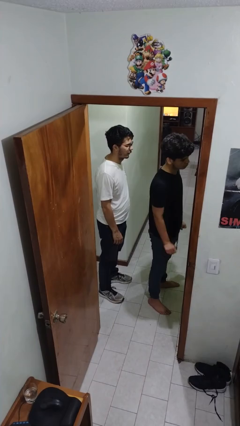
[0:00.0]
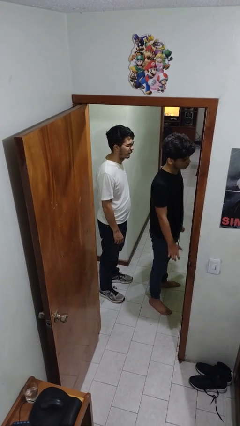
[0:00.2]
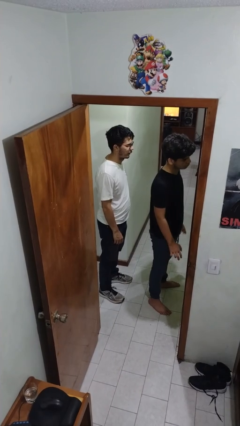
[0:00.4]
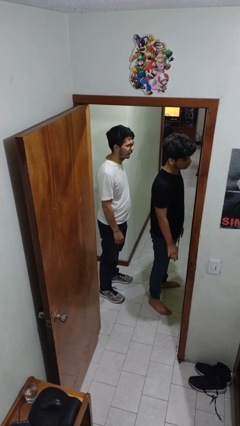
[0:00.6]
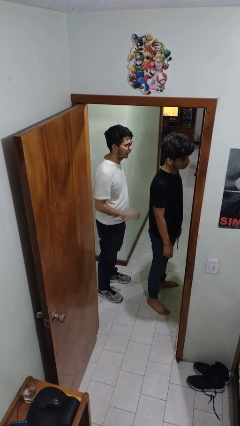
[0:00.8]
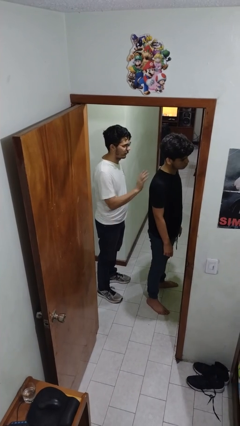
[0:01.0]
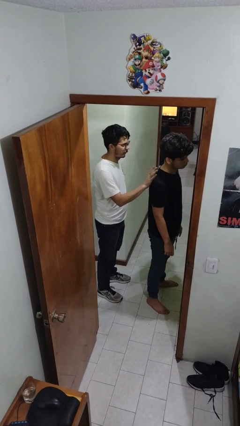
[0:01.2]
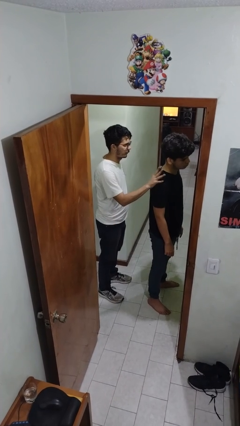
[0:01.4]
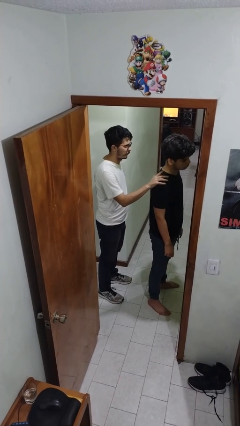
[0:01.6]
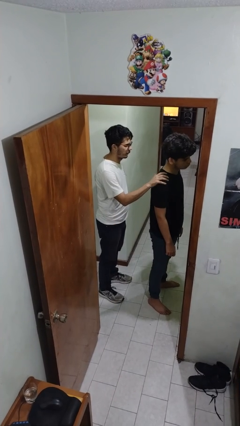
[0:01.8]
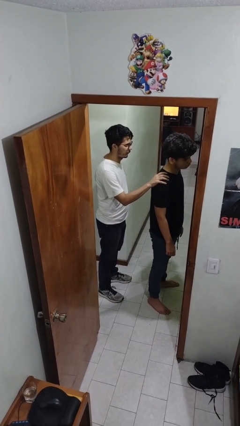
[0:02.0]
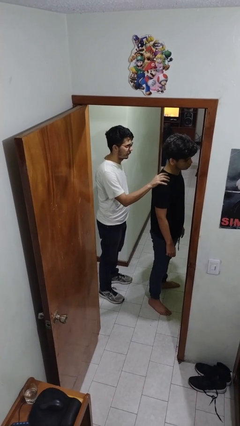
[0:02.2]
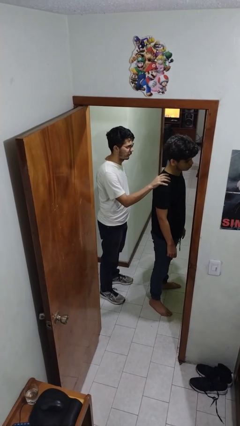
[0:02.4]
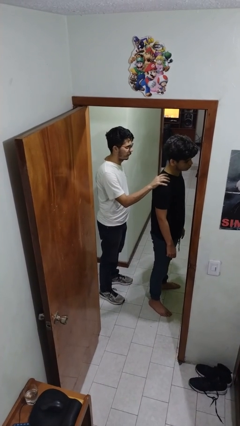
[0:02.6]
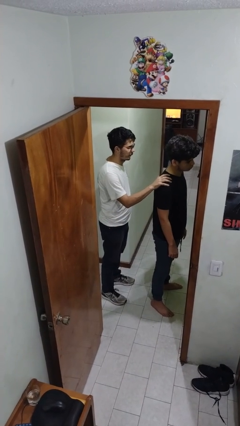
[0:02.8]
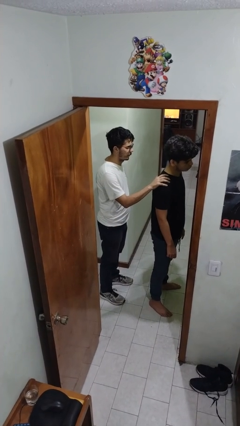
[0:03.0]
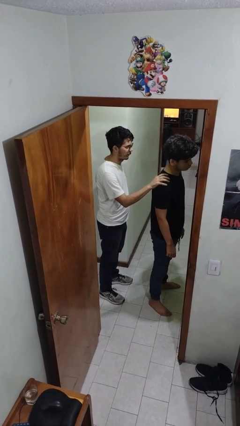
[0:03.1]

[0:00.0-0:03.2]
person grabs person by shoulder

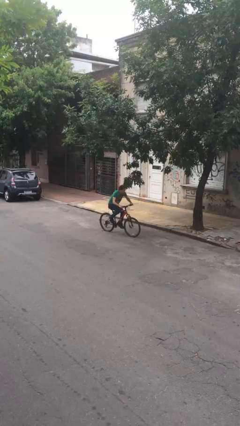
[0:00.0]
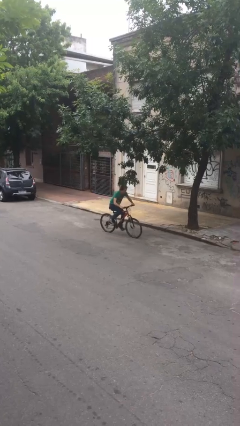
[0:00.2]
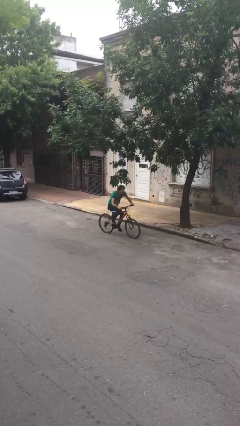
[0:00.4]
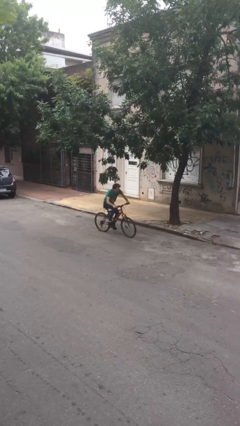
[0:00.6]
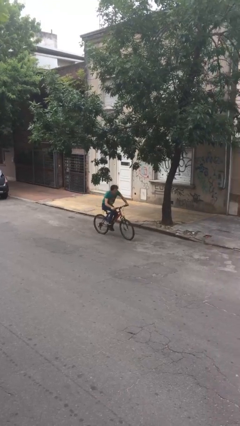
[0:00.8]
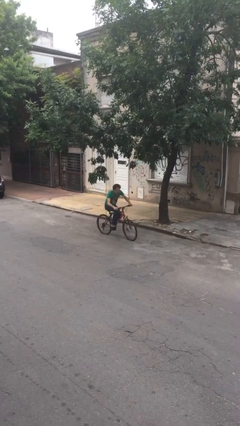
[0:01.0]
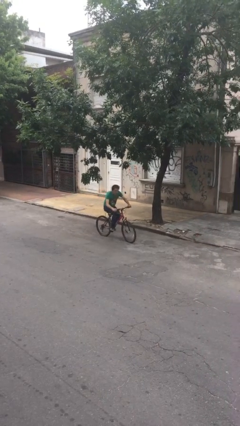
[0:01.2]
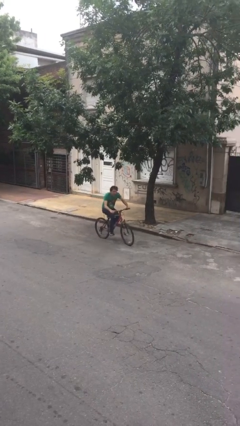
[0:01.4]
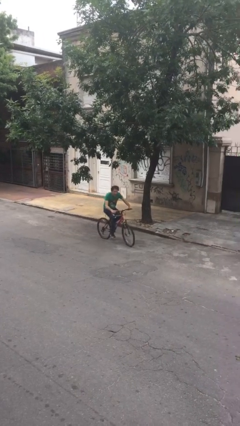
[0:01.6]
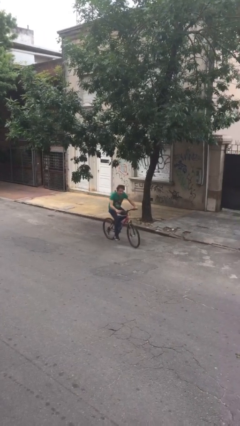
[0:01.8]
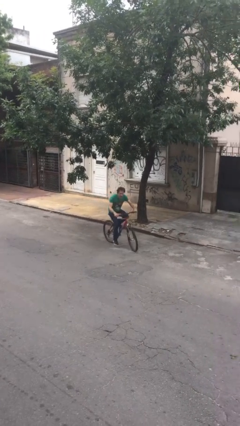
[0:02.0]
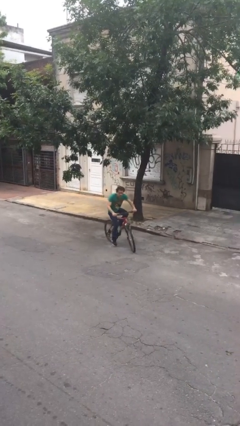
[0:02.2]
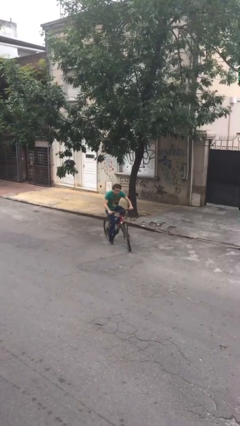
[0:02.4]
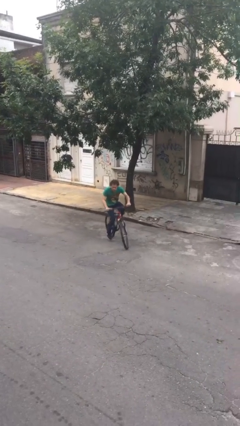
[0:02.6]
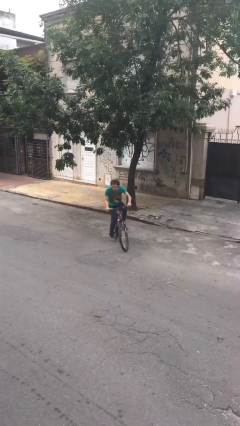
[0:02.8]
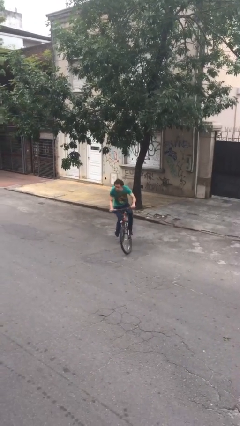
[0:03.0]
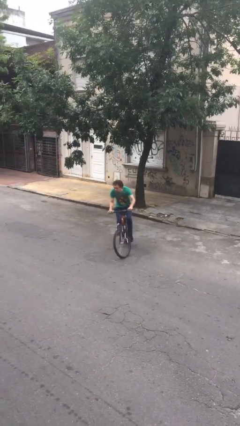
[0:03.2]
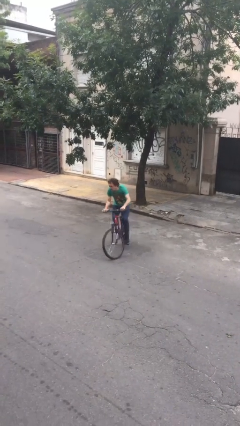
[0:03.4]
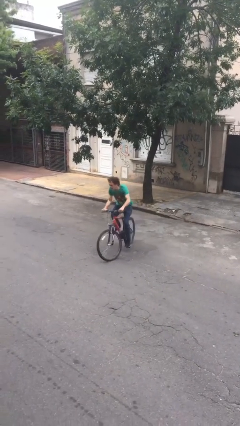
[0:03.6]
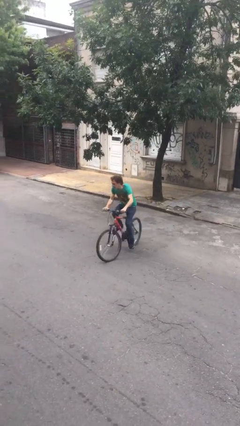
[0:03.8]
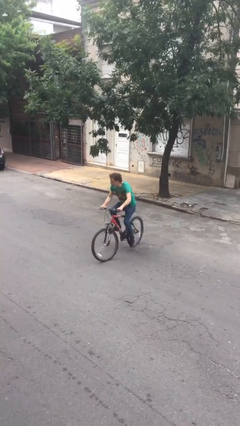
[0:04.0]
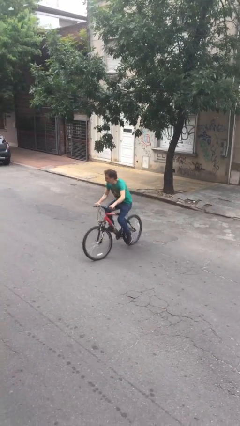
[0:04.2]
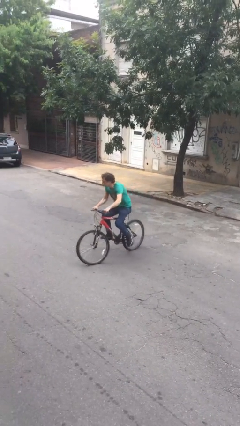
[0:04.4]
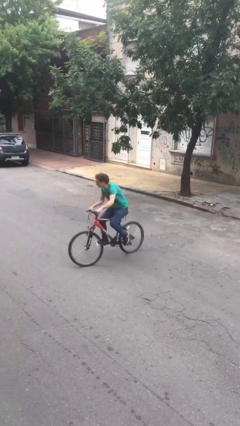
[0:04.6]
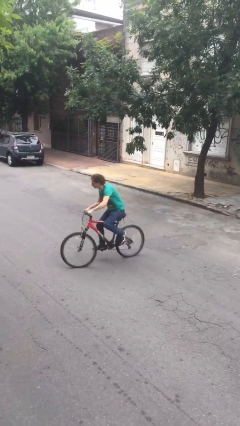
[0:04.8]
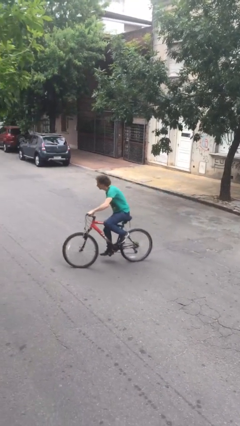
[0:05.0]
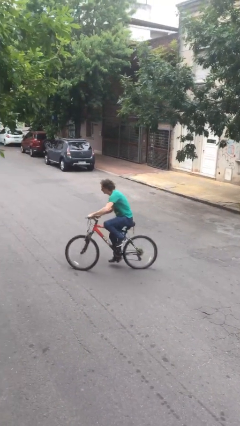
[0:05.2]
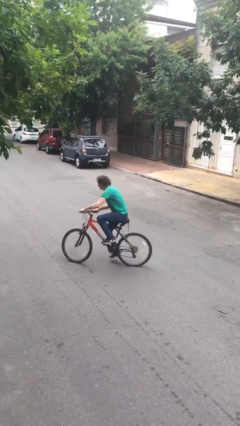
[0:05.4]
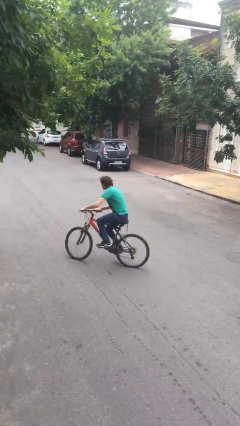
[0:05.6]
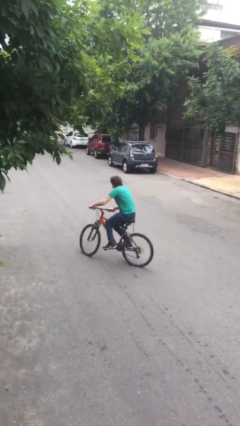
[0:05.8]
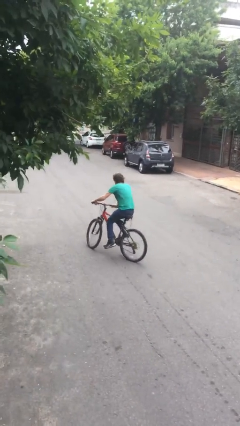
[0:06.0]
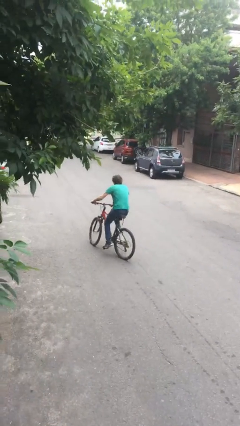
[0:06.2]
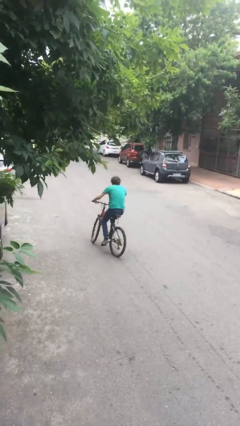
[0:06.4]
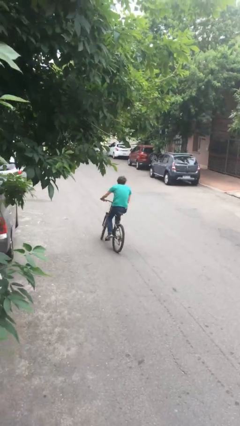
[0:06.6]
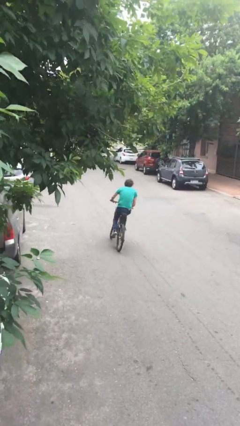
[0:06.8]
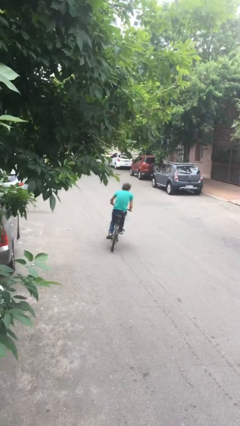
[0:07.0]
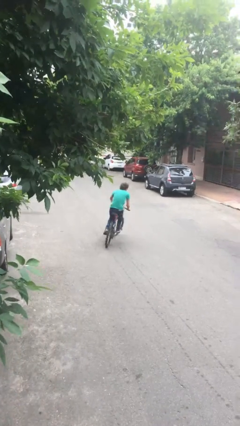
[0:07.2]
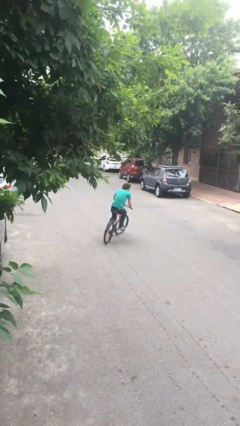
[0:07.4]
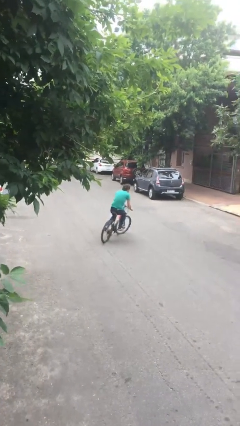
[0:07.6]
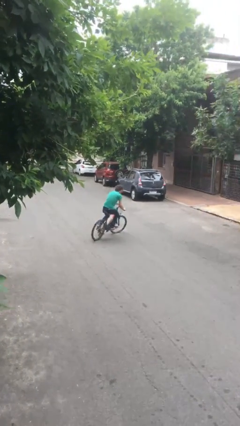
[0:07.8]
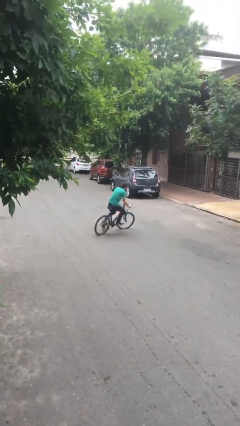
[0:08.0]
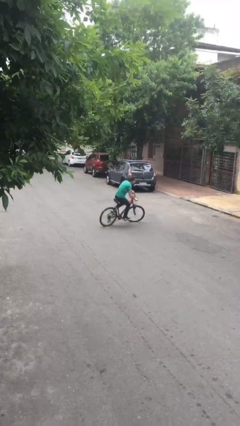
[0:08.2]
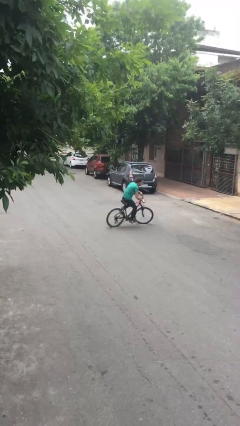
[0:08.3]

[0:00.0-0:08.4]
person rides bicycle

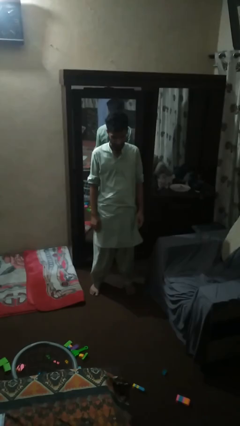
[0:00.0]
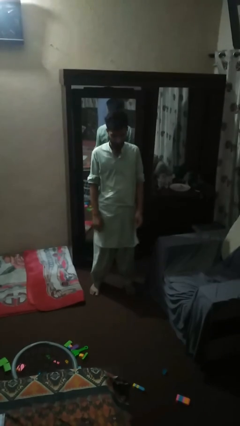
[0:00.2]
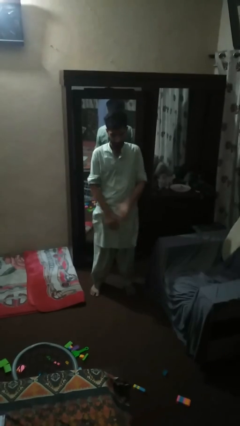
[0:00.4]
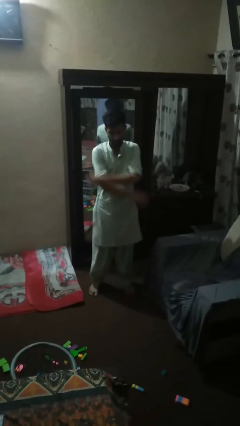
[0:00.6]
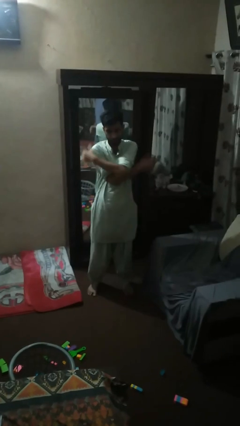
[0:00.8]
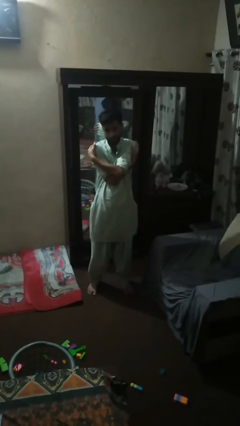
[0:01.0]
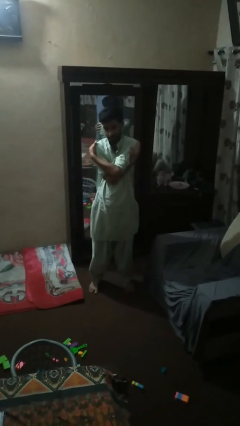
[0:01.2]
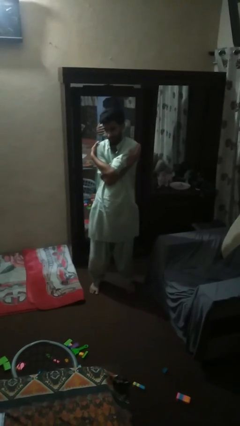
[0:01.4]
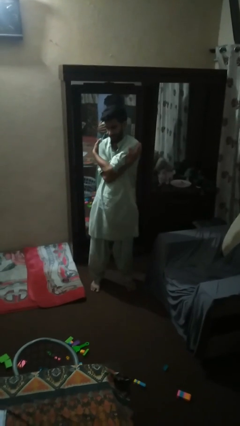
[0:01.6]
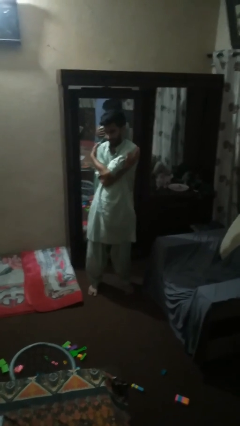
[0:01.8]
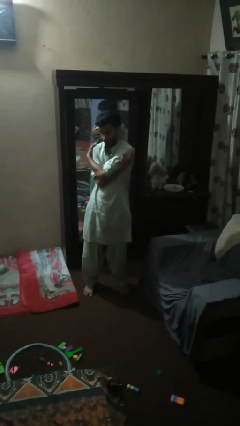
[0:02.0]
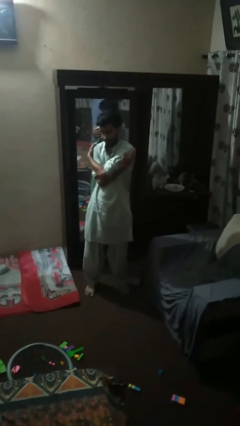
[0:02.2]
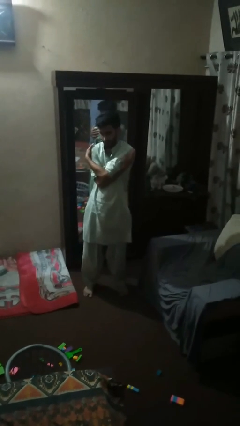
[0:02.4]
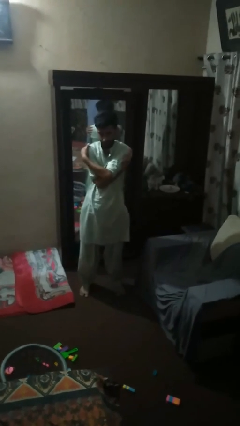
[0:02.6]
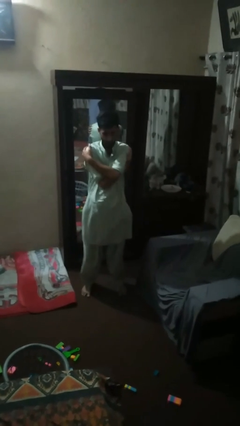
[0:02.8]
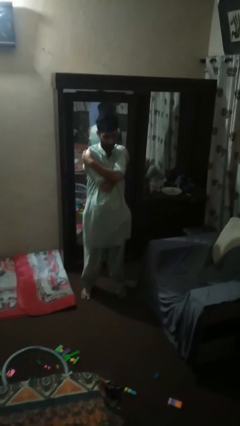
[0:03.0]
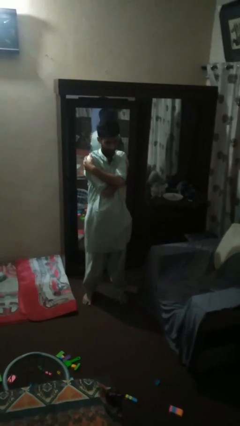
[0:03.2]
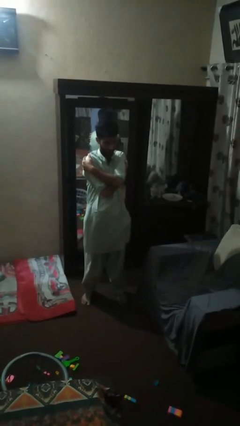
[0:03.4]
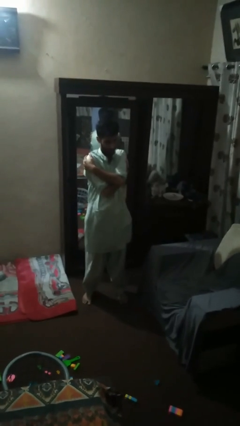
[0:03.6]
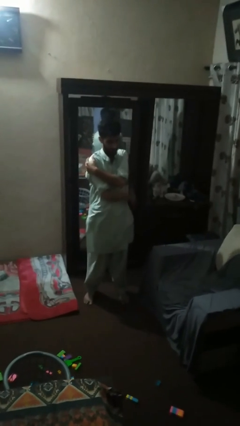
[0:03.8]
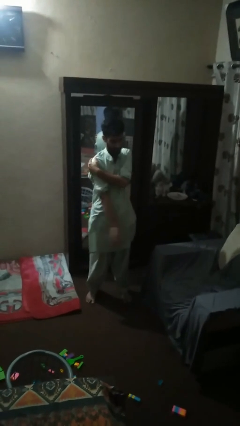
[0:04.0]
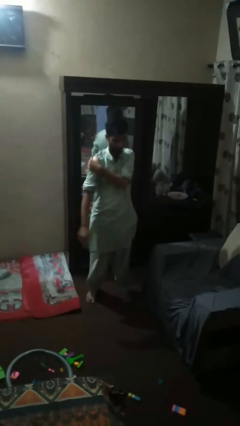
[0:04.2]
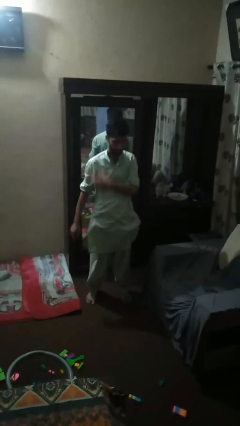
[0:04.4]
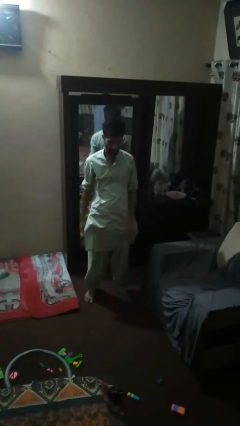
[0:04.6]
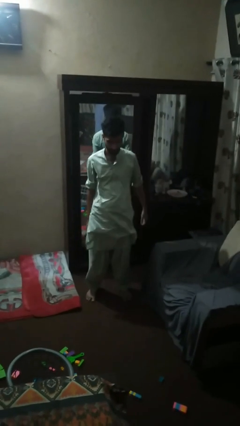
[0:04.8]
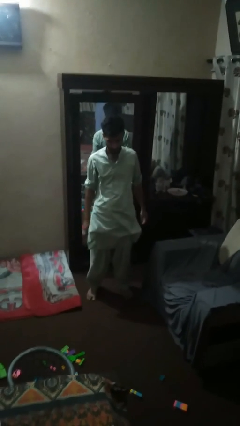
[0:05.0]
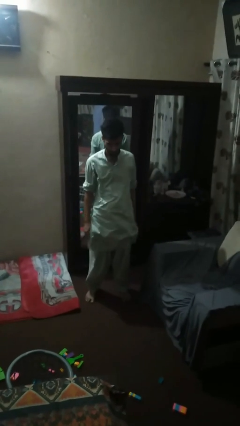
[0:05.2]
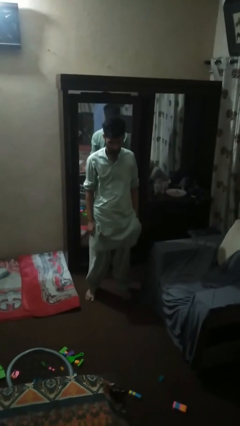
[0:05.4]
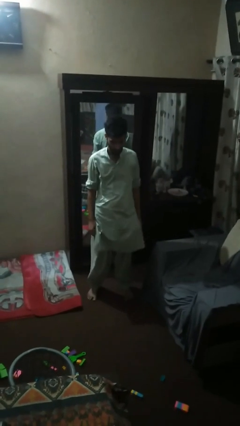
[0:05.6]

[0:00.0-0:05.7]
person stretches arms to side
